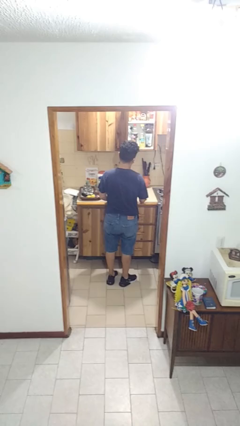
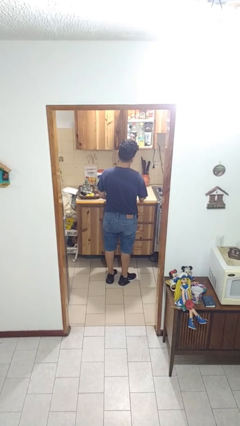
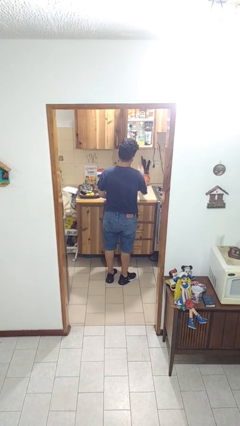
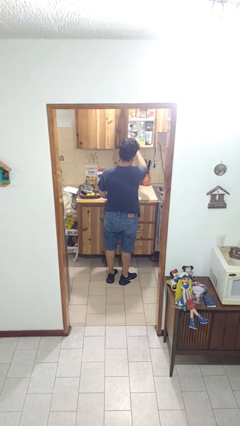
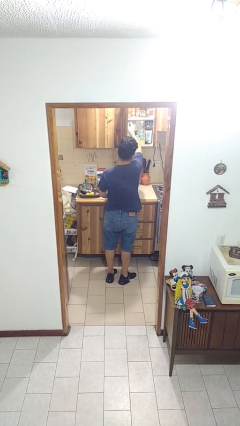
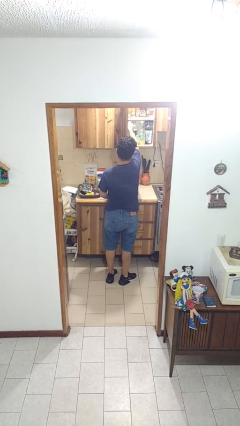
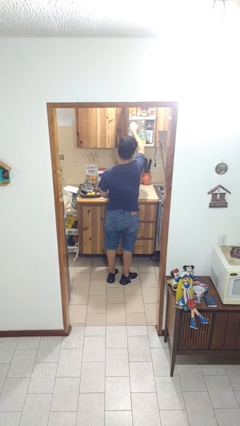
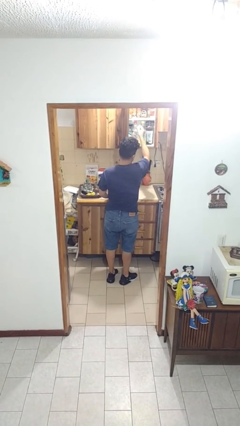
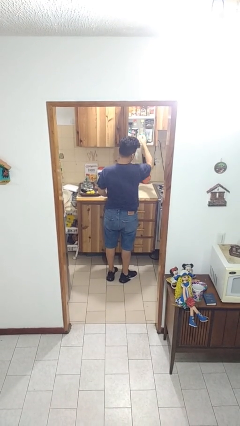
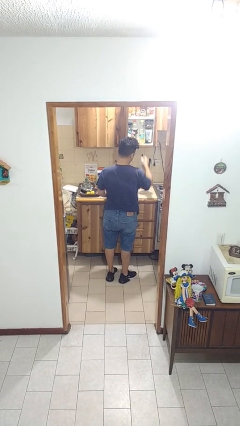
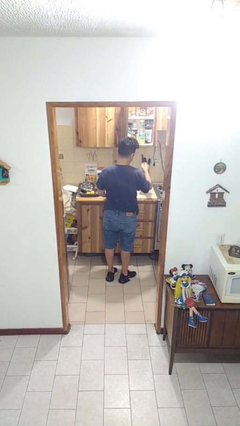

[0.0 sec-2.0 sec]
person takes object from cabinet

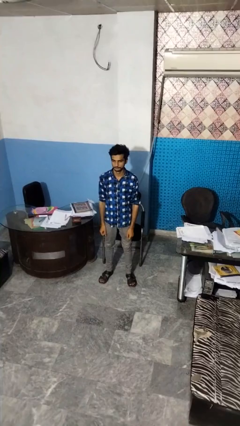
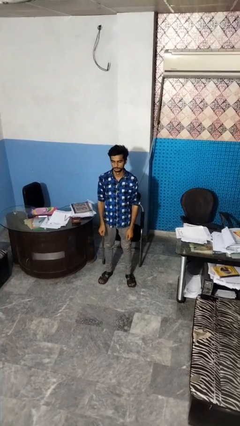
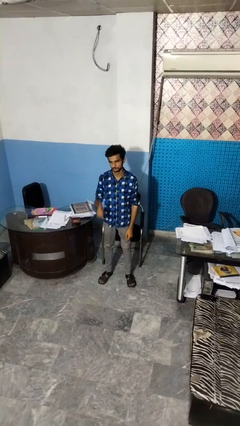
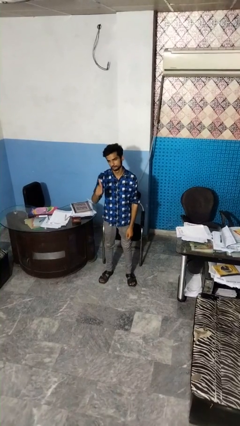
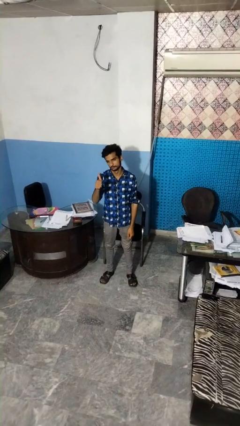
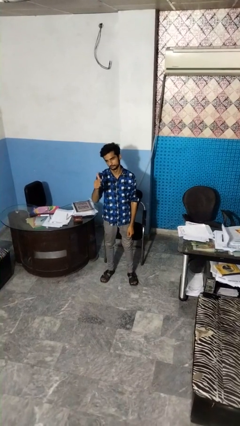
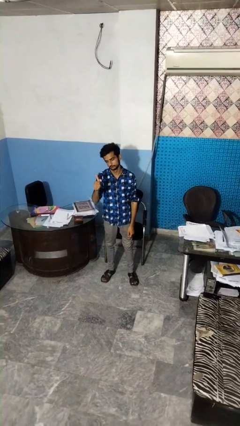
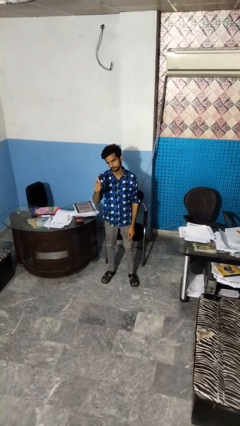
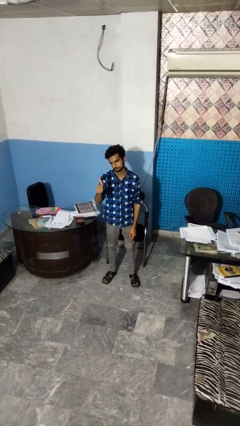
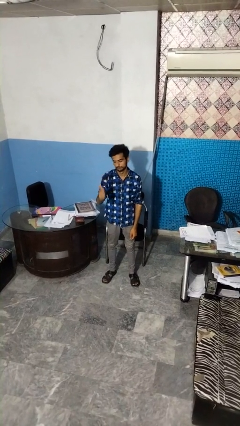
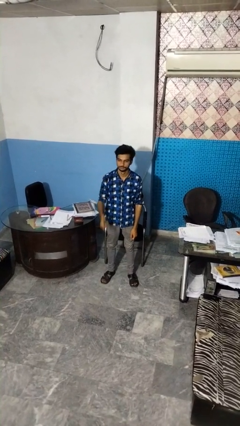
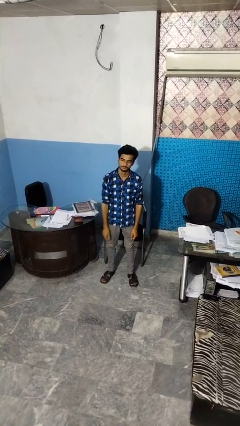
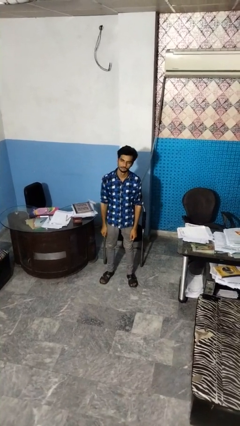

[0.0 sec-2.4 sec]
person gestures thumbs up

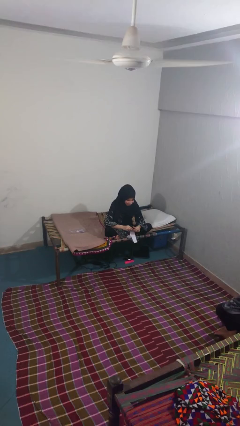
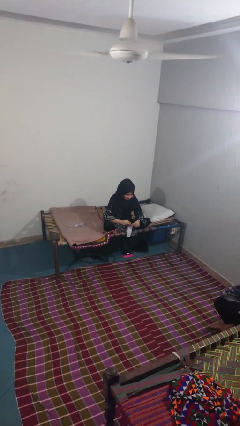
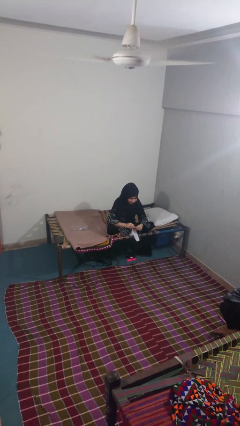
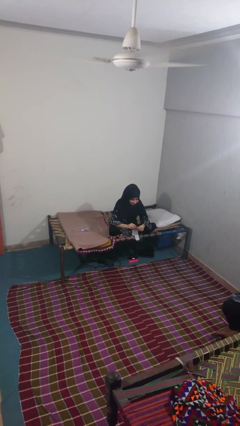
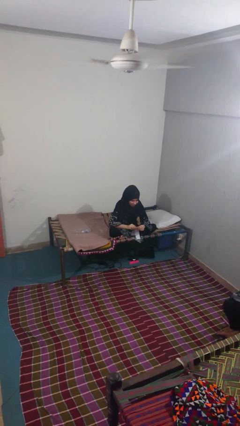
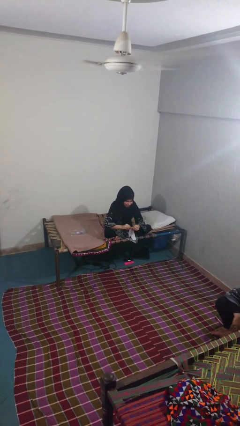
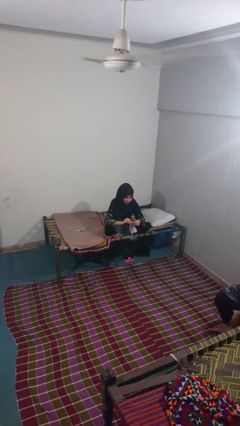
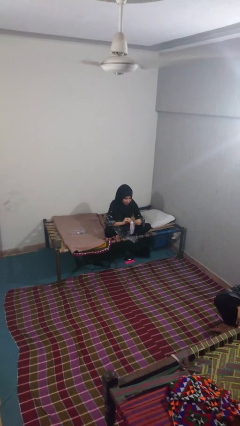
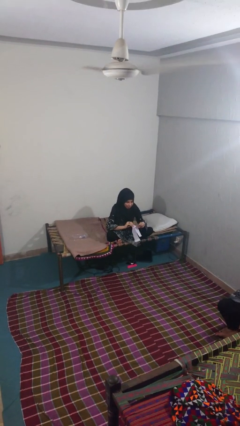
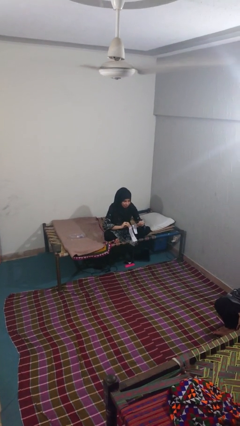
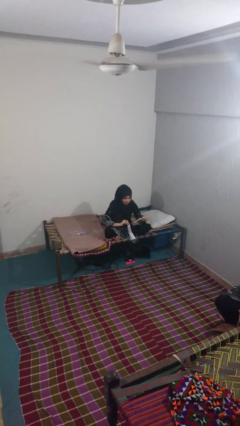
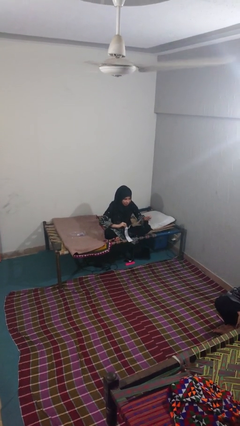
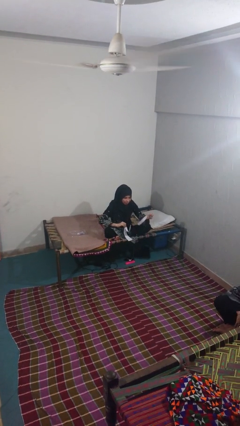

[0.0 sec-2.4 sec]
person tears paper

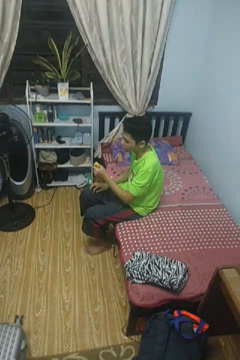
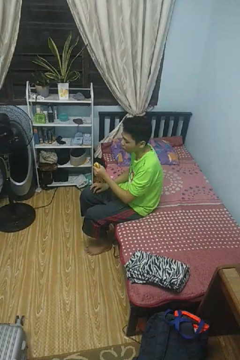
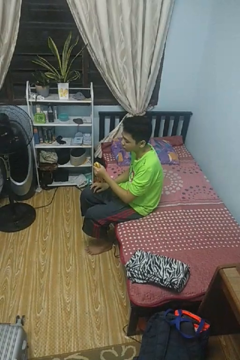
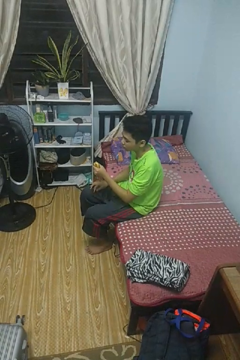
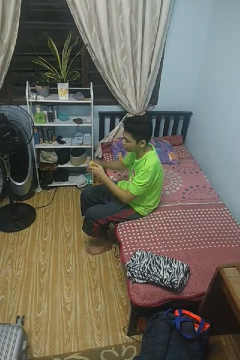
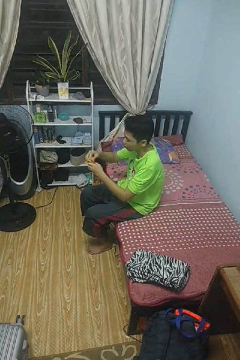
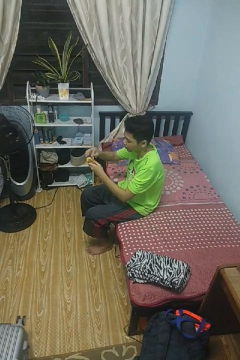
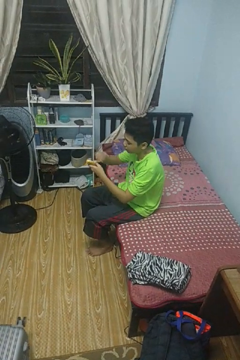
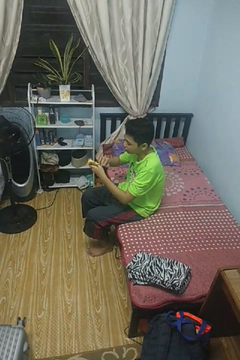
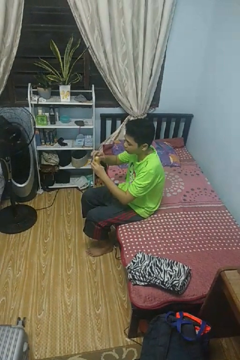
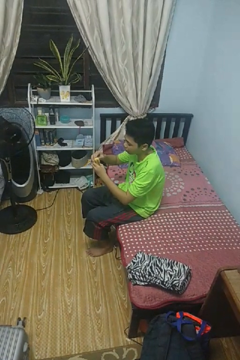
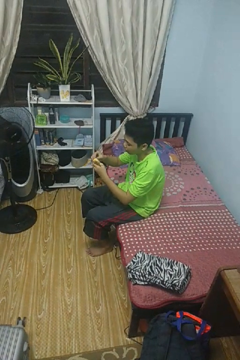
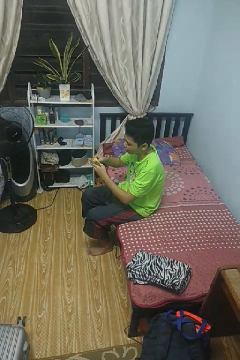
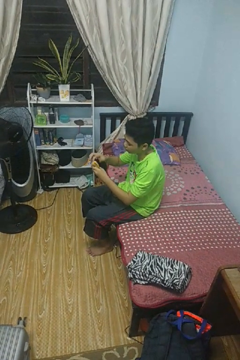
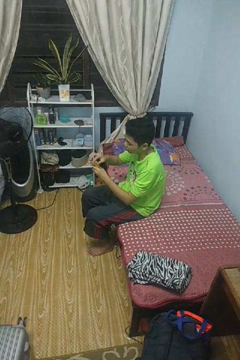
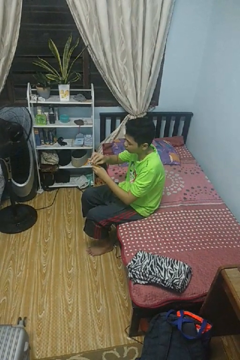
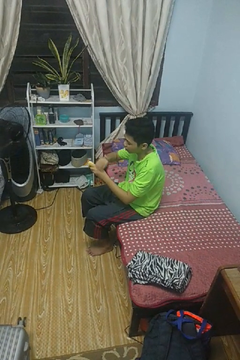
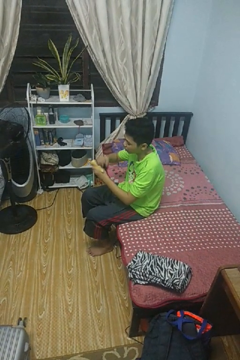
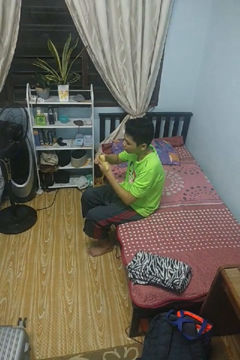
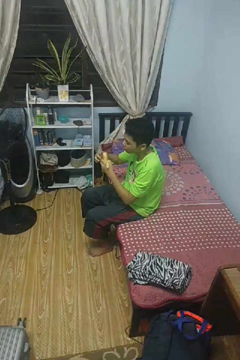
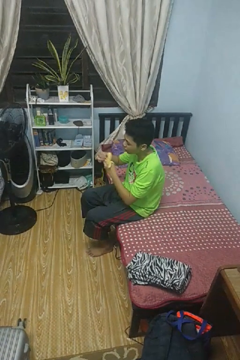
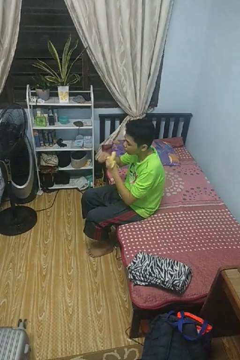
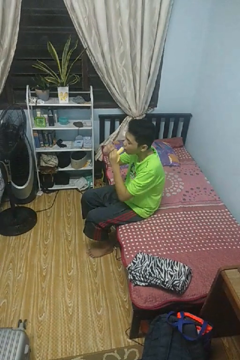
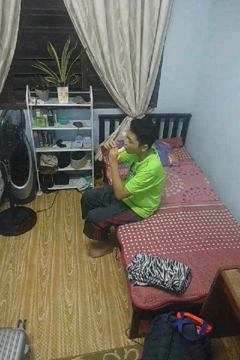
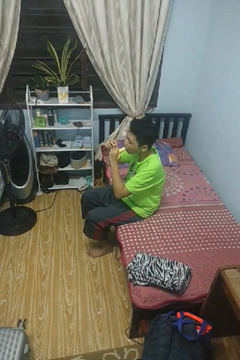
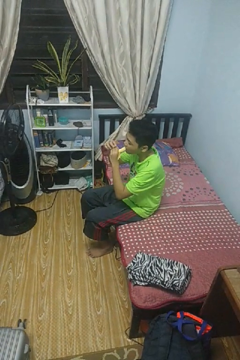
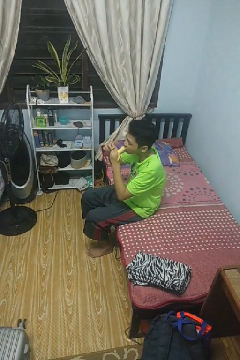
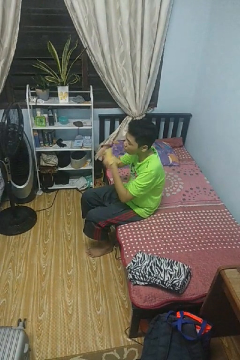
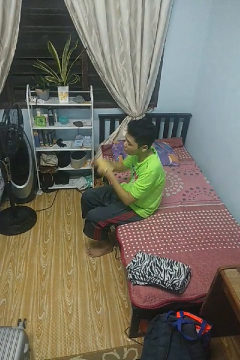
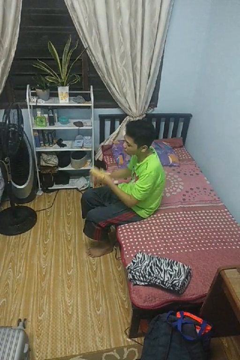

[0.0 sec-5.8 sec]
person eats banana

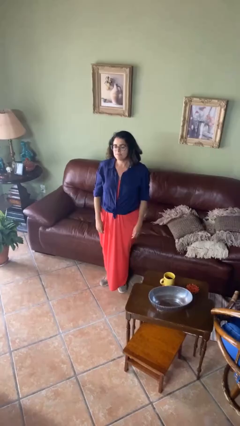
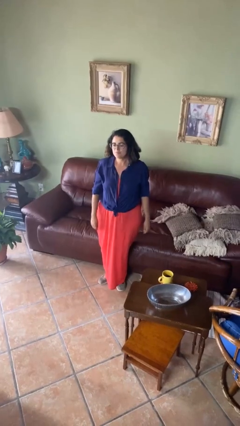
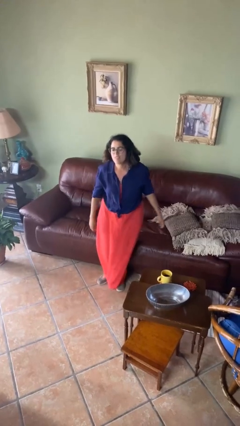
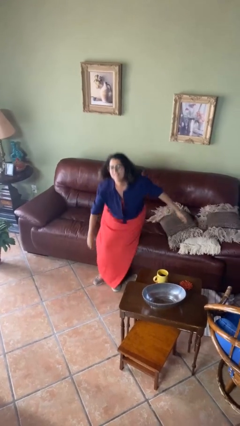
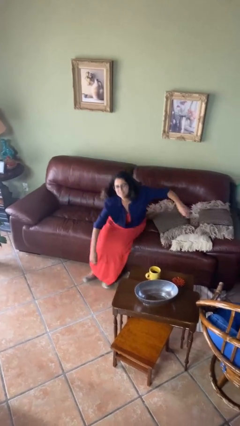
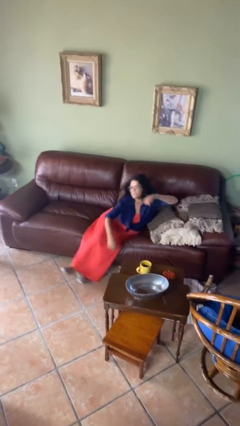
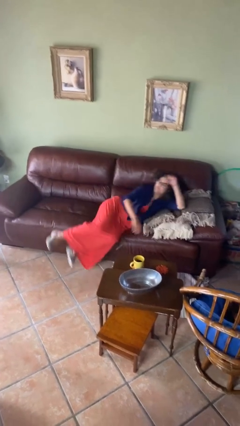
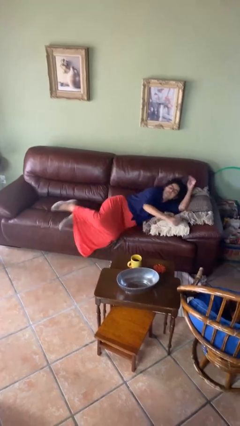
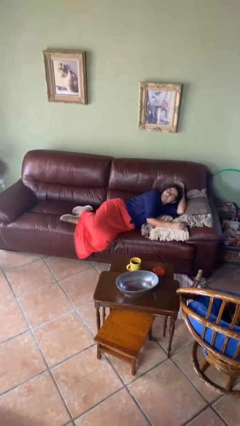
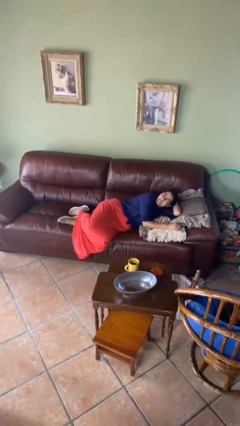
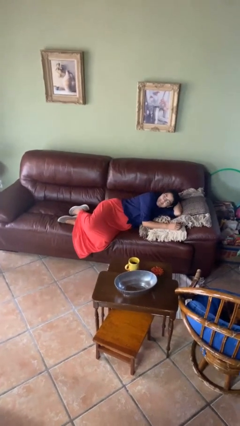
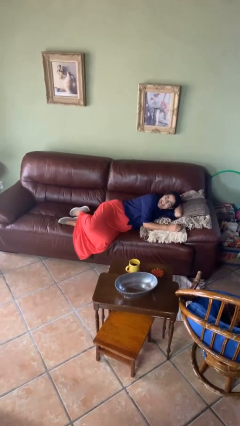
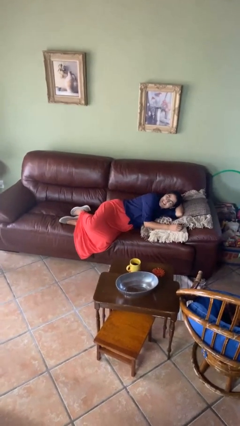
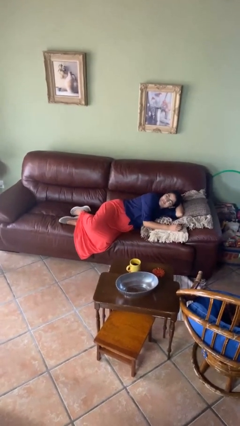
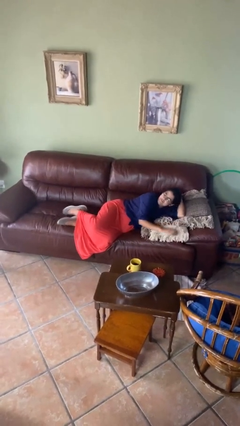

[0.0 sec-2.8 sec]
person lies down on couch

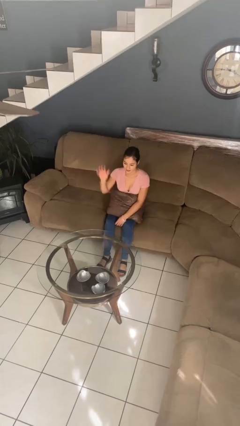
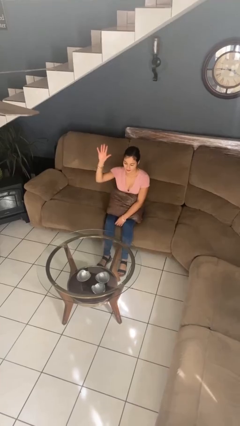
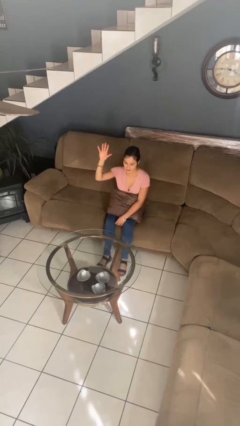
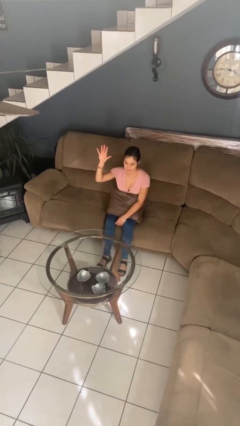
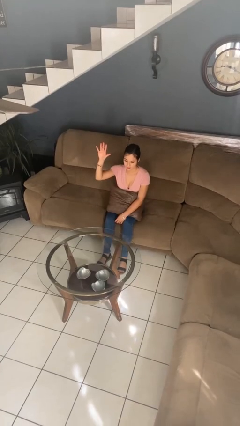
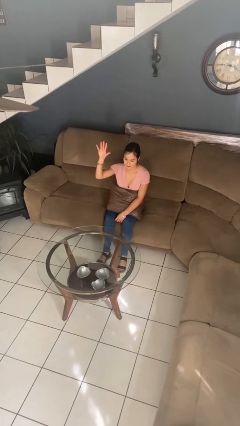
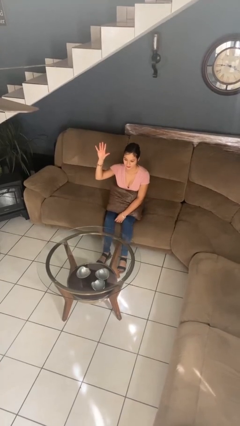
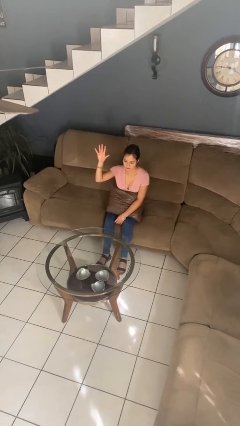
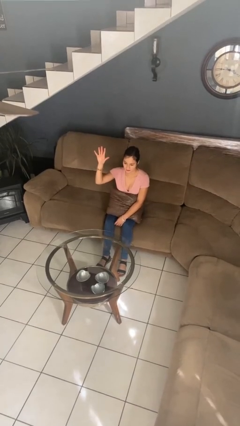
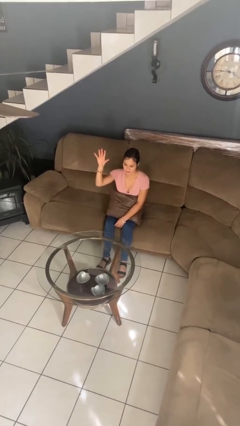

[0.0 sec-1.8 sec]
person gestures number five

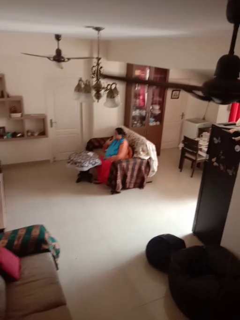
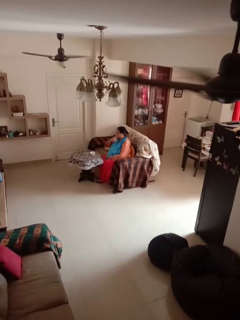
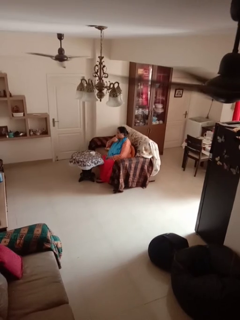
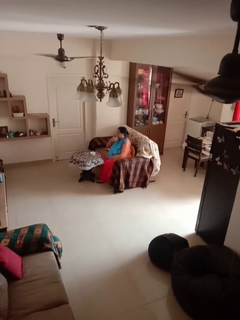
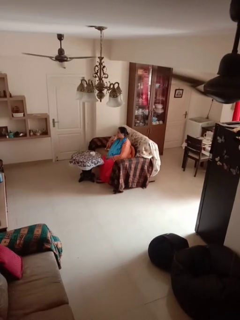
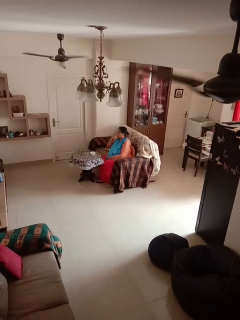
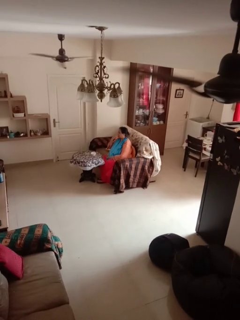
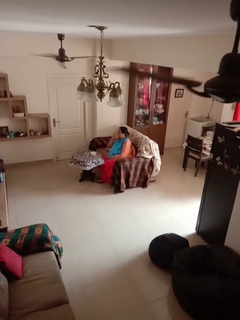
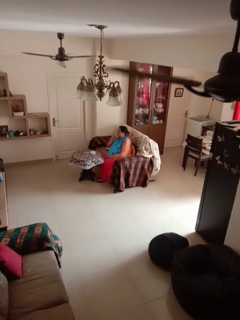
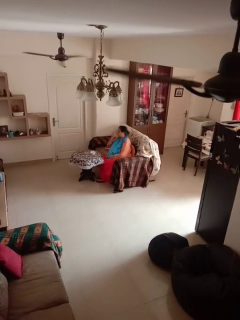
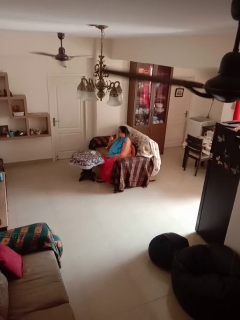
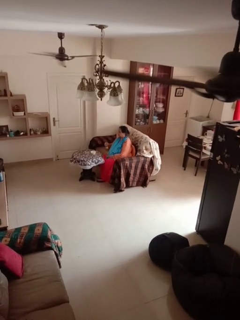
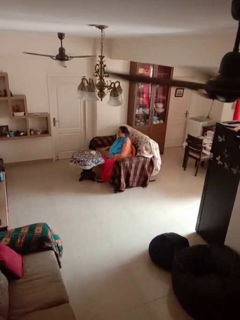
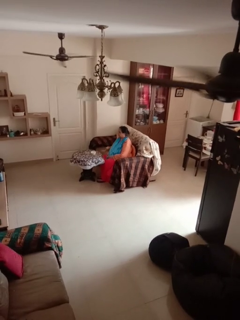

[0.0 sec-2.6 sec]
person licks fingers
